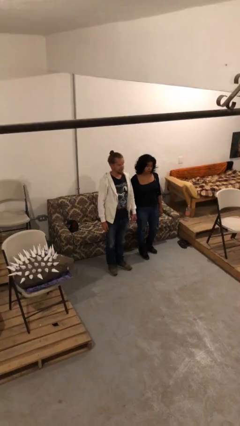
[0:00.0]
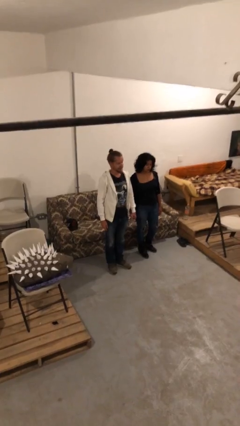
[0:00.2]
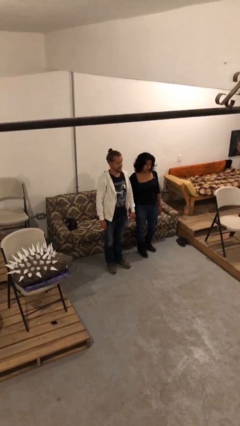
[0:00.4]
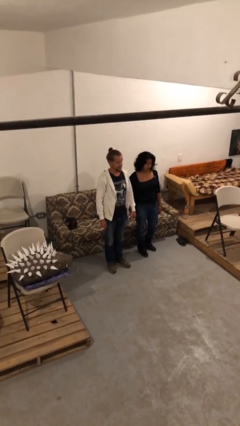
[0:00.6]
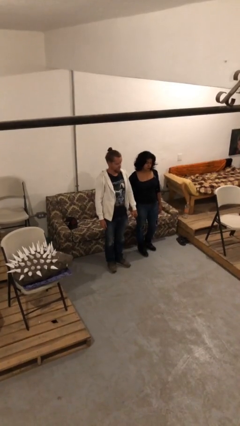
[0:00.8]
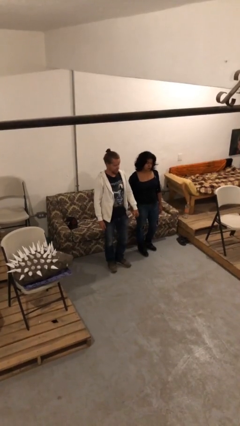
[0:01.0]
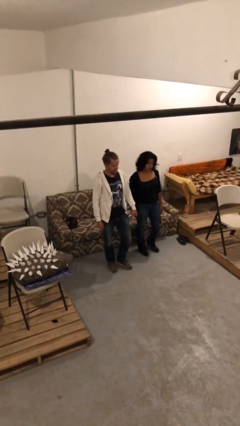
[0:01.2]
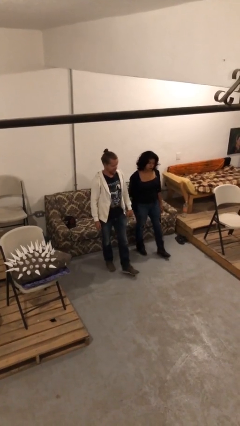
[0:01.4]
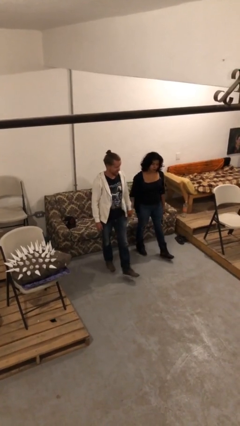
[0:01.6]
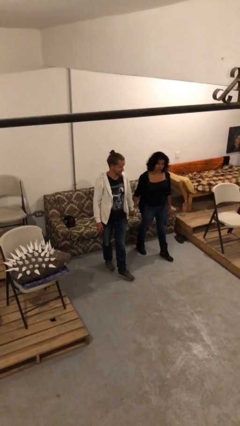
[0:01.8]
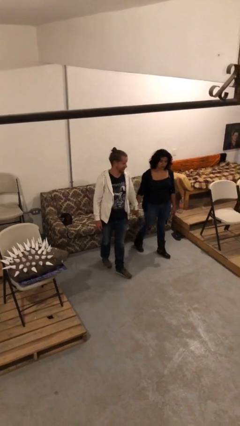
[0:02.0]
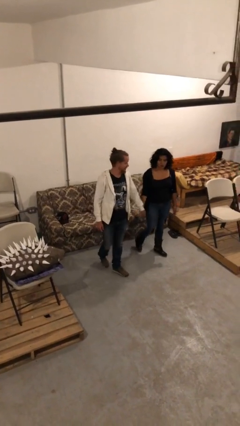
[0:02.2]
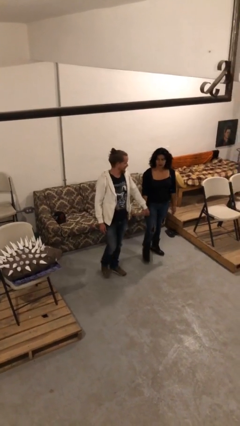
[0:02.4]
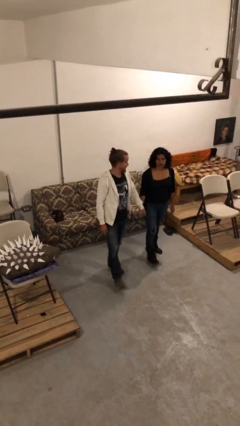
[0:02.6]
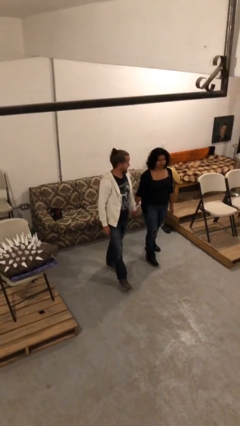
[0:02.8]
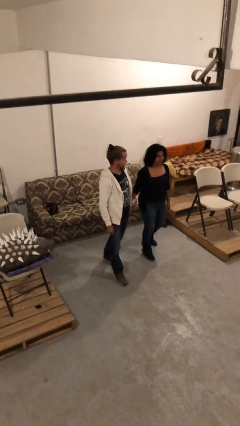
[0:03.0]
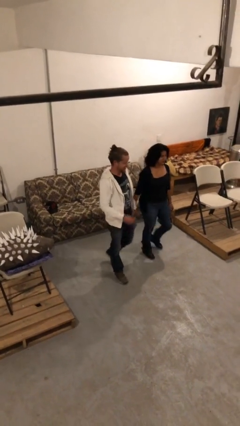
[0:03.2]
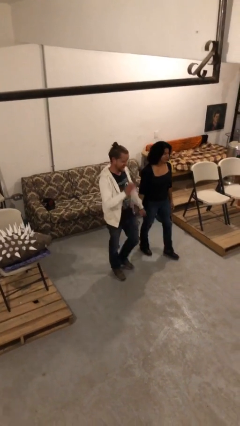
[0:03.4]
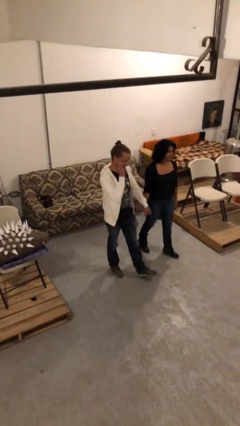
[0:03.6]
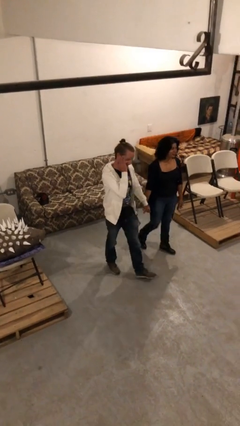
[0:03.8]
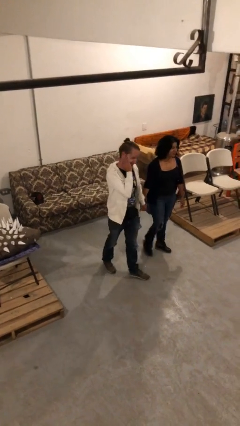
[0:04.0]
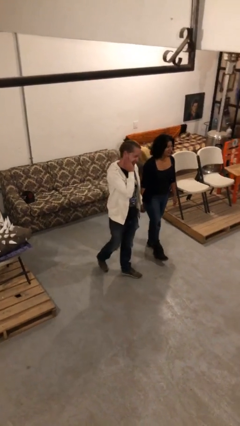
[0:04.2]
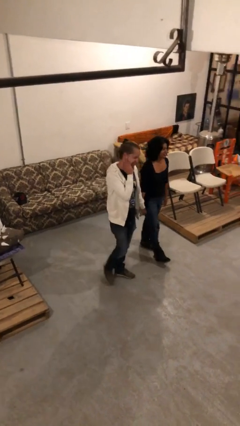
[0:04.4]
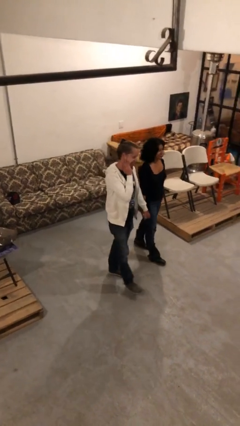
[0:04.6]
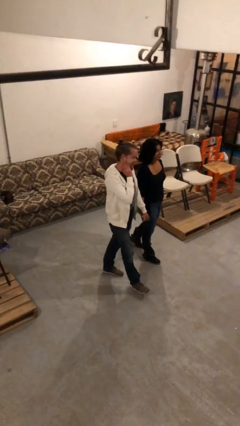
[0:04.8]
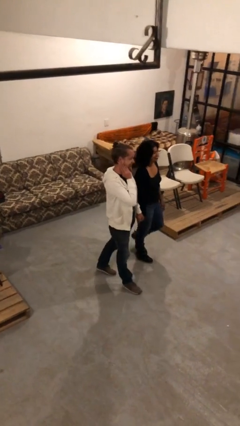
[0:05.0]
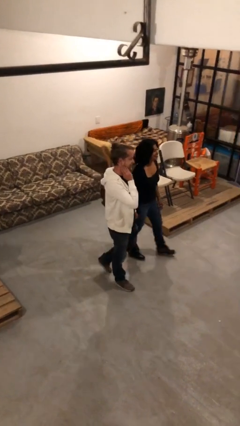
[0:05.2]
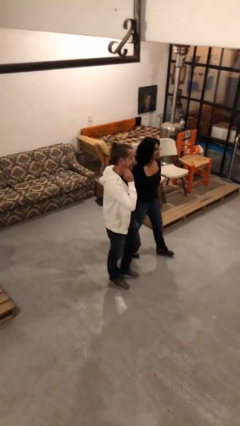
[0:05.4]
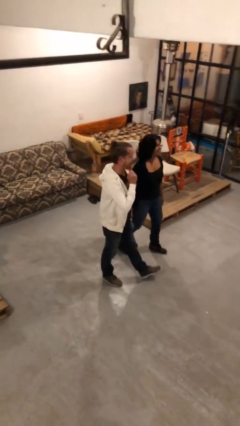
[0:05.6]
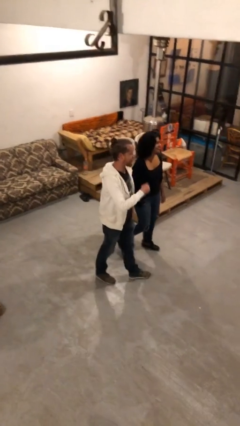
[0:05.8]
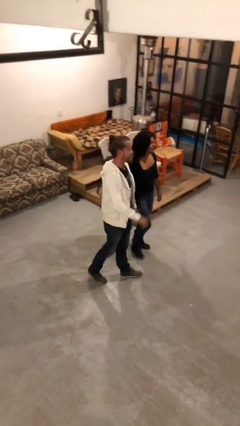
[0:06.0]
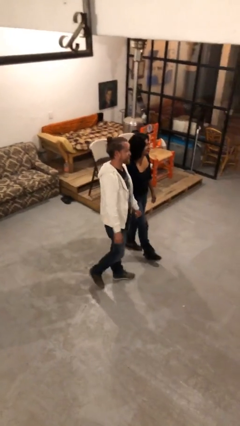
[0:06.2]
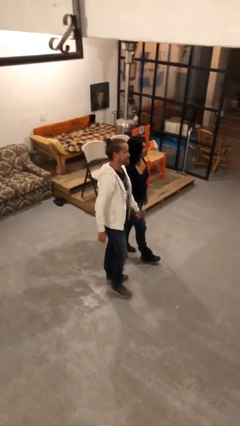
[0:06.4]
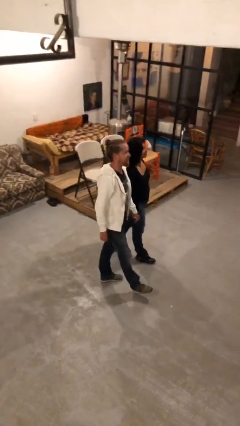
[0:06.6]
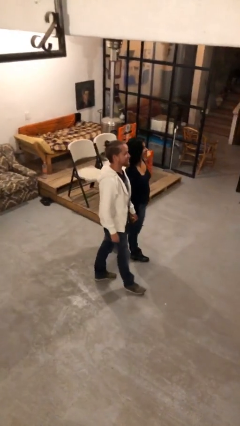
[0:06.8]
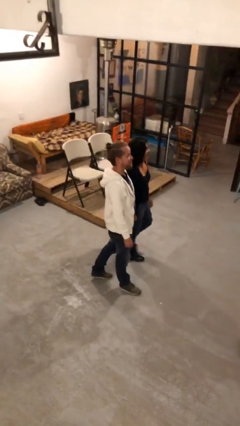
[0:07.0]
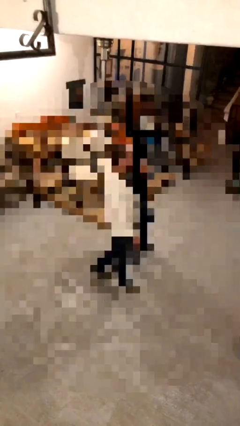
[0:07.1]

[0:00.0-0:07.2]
person holds hand

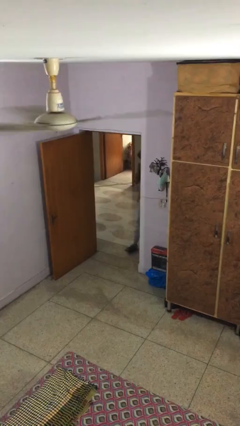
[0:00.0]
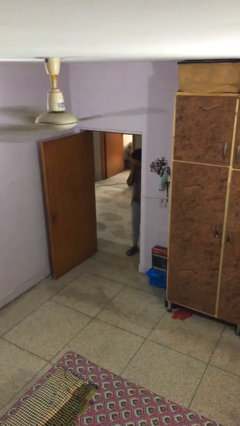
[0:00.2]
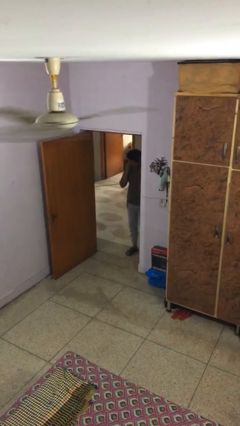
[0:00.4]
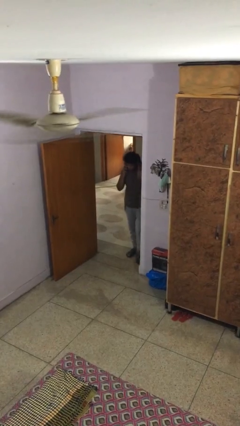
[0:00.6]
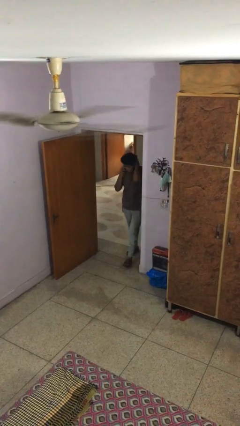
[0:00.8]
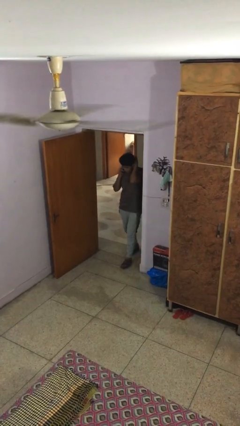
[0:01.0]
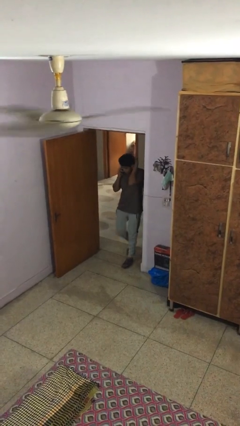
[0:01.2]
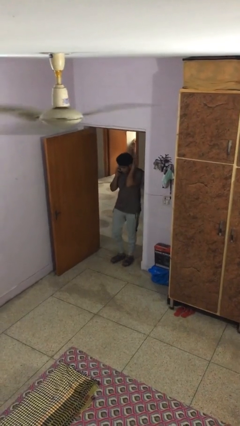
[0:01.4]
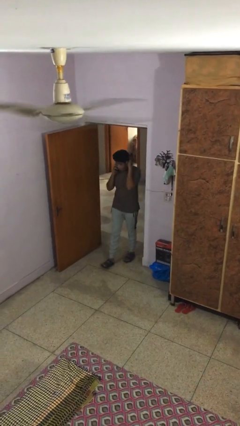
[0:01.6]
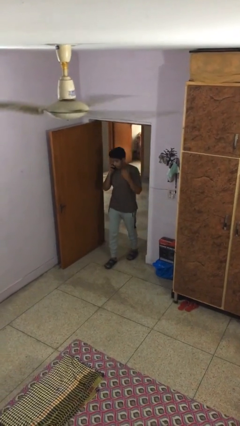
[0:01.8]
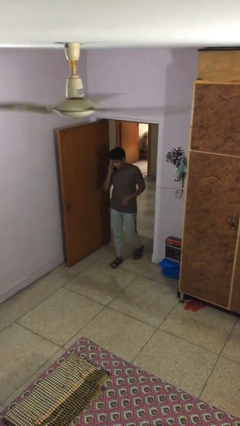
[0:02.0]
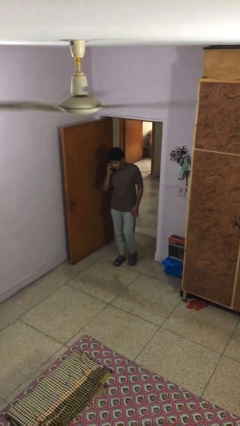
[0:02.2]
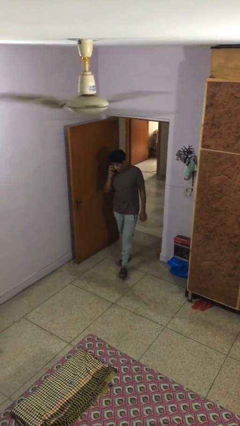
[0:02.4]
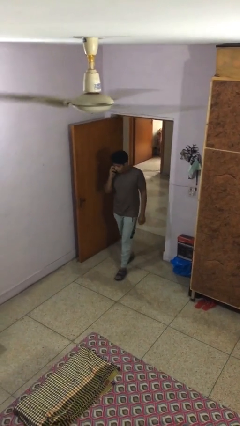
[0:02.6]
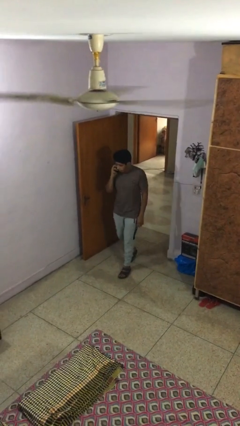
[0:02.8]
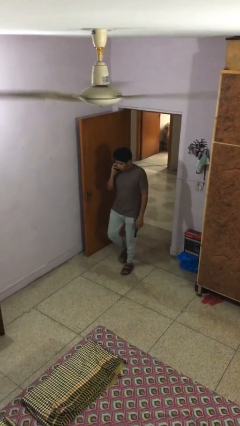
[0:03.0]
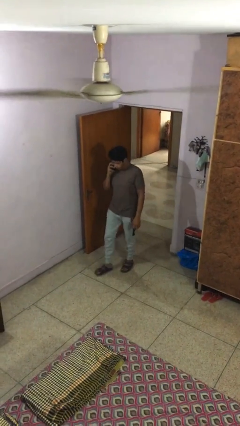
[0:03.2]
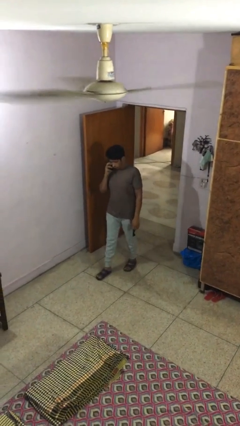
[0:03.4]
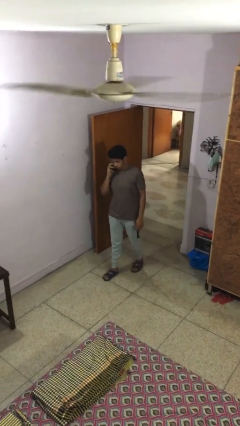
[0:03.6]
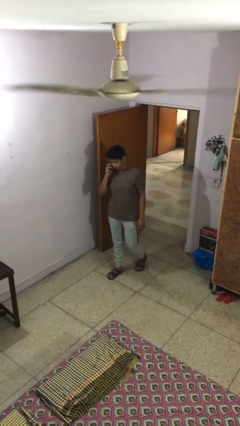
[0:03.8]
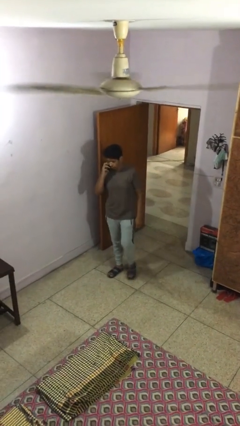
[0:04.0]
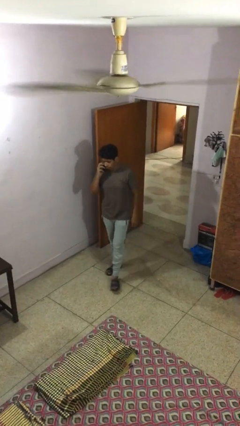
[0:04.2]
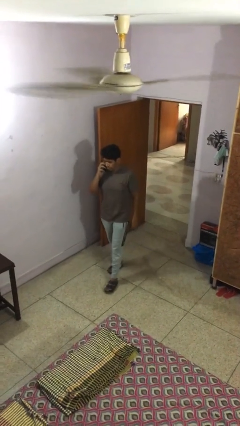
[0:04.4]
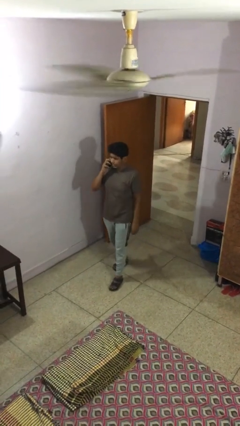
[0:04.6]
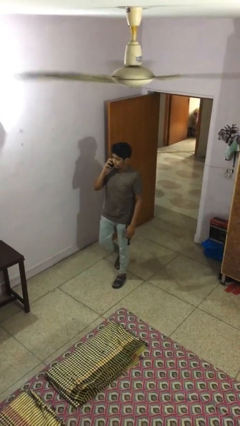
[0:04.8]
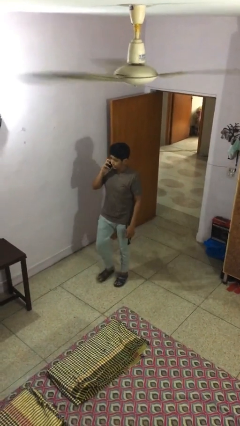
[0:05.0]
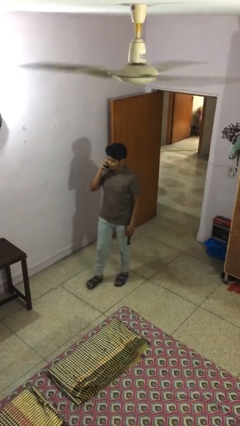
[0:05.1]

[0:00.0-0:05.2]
person enters scene through structure

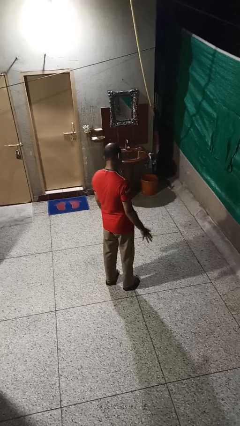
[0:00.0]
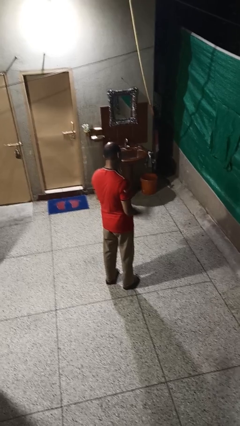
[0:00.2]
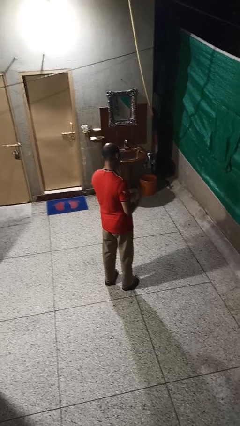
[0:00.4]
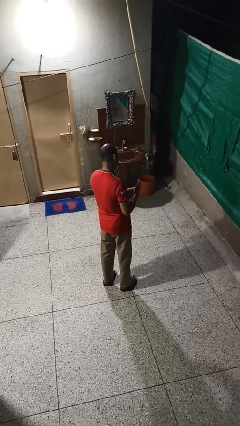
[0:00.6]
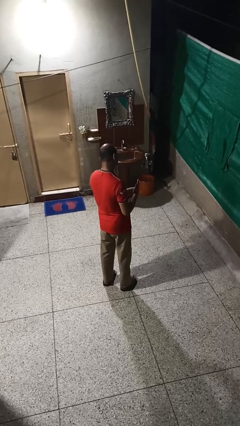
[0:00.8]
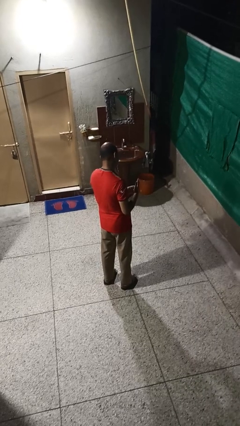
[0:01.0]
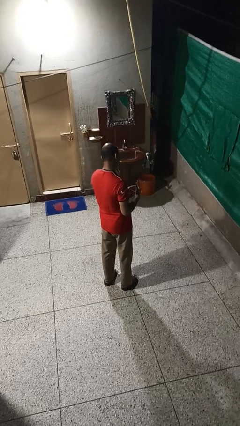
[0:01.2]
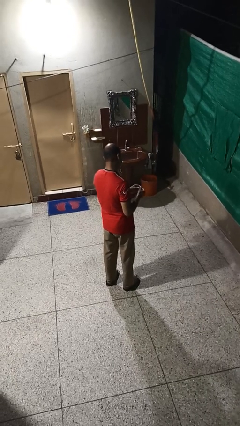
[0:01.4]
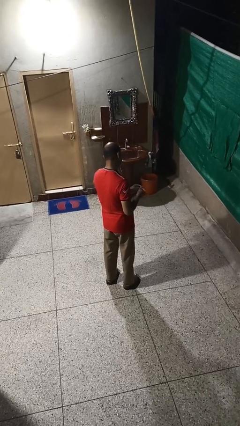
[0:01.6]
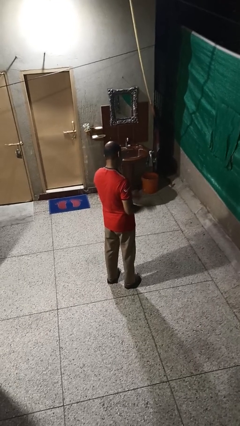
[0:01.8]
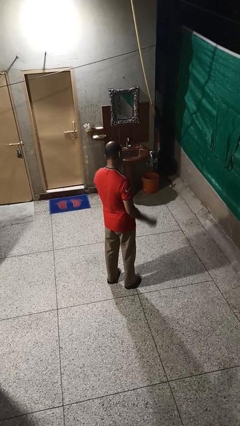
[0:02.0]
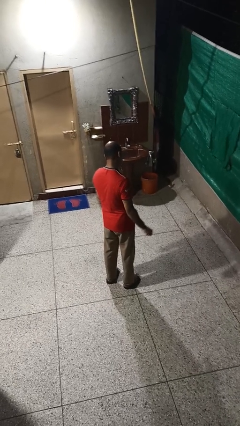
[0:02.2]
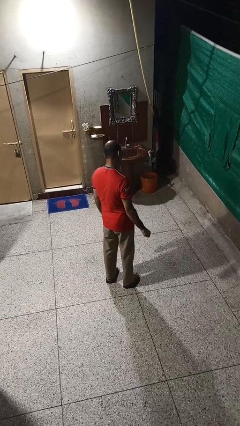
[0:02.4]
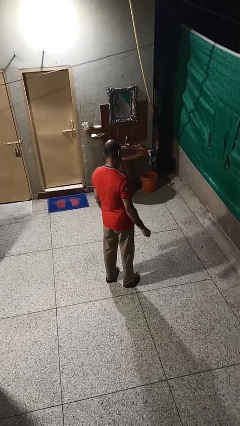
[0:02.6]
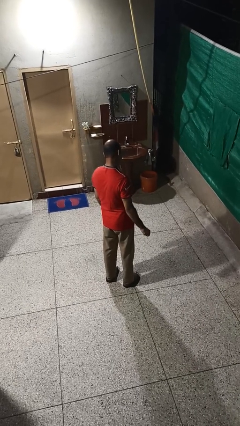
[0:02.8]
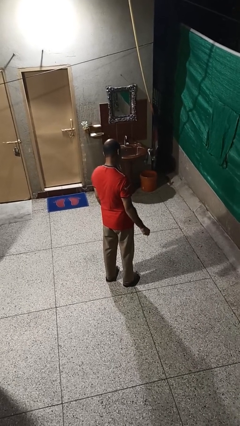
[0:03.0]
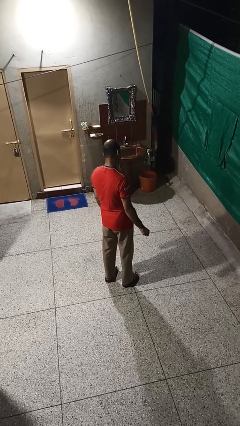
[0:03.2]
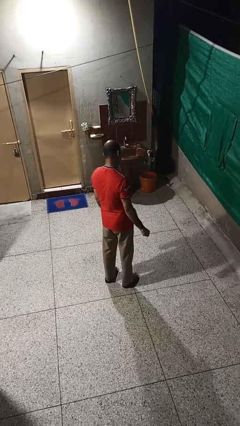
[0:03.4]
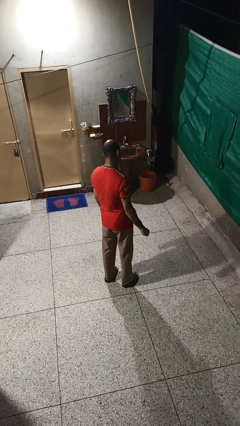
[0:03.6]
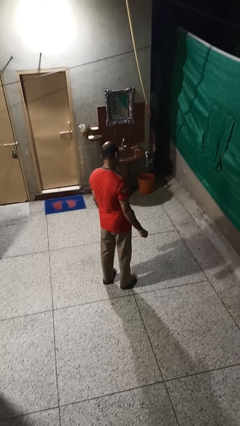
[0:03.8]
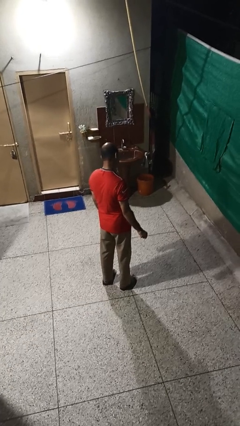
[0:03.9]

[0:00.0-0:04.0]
person takes off ring

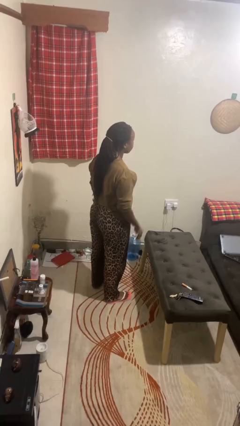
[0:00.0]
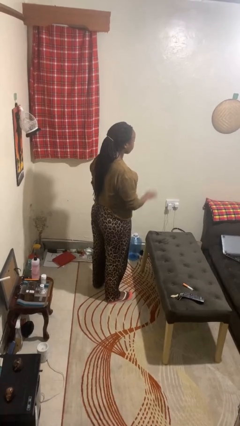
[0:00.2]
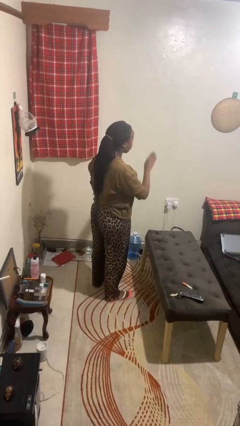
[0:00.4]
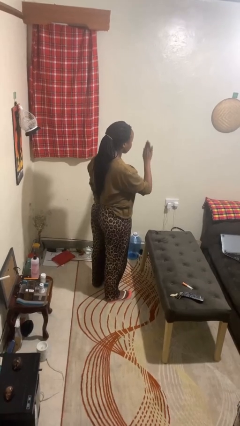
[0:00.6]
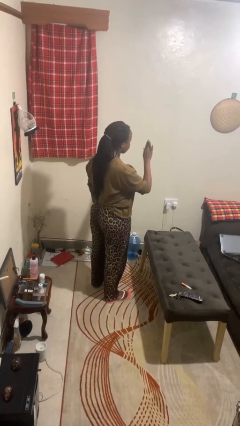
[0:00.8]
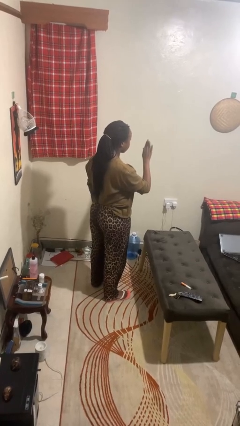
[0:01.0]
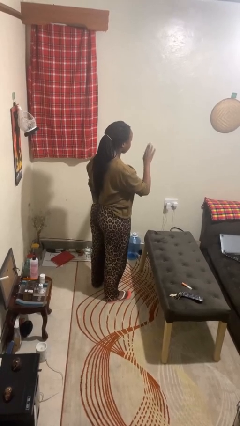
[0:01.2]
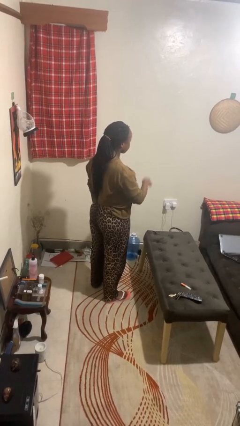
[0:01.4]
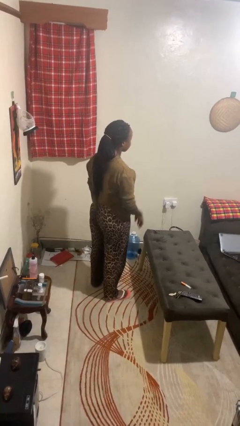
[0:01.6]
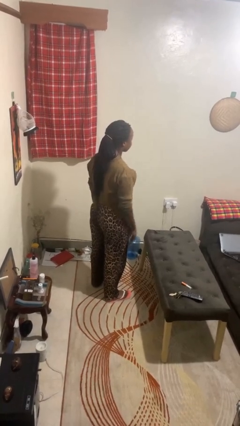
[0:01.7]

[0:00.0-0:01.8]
person gestures stop
